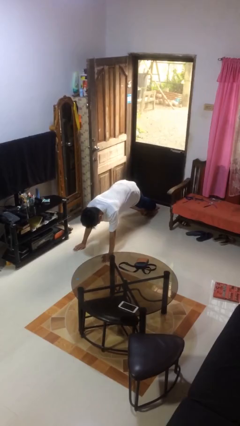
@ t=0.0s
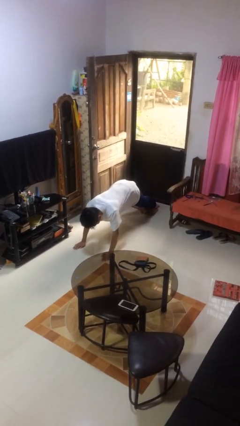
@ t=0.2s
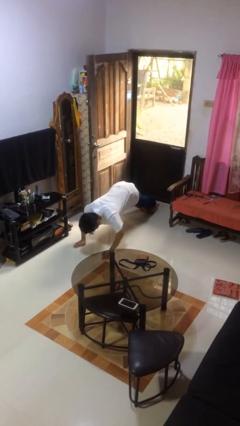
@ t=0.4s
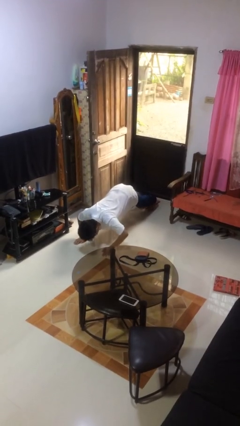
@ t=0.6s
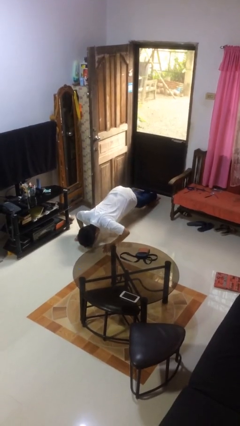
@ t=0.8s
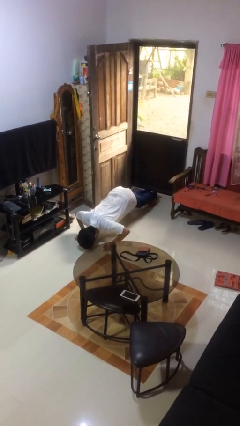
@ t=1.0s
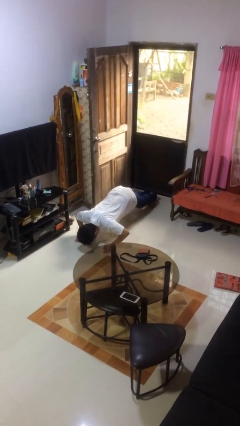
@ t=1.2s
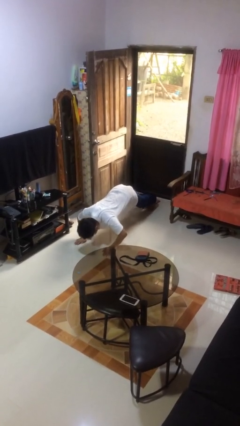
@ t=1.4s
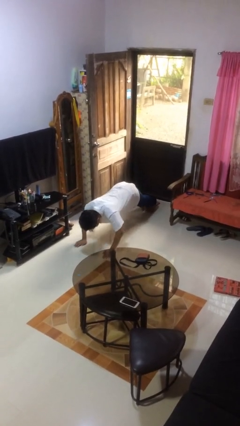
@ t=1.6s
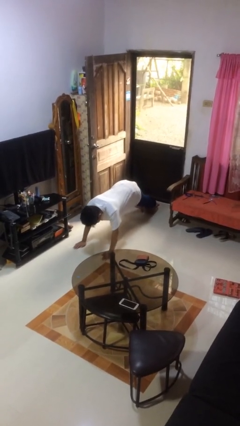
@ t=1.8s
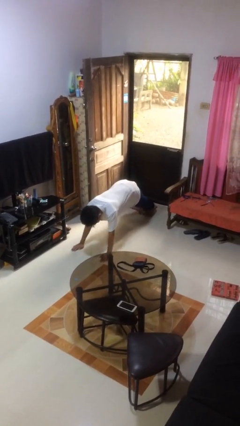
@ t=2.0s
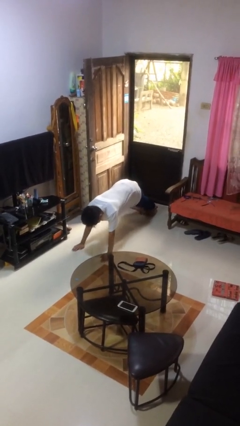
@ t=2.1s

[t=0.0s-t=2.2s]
person exercises with pushup

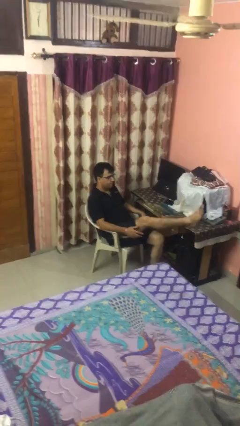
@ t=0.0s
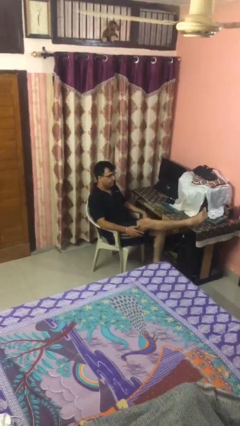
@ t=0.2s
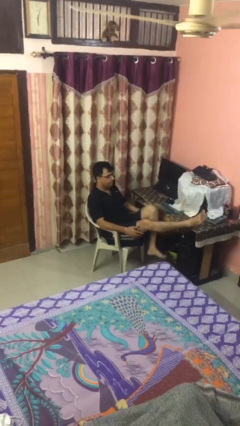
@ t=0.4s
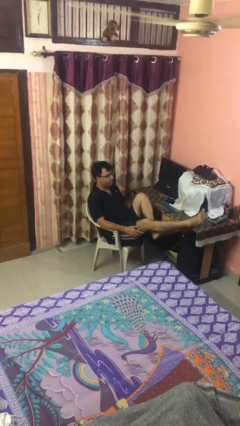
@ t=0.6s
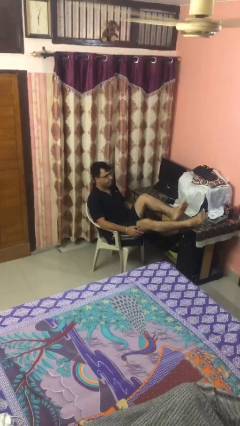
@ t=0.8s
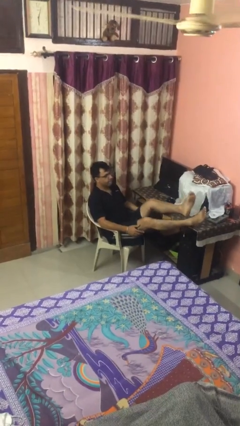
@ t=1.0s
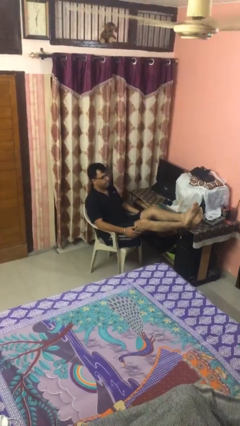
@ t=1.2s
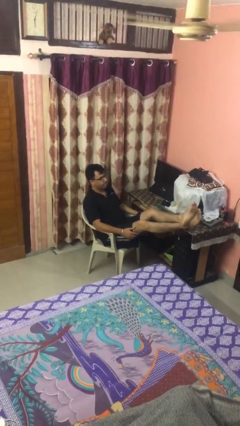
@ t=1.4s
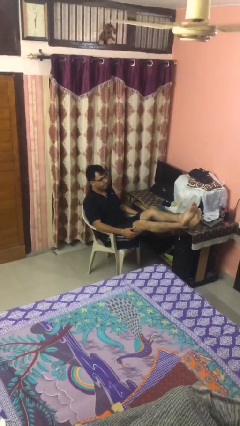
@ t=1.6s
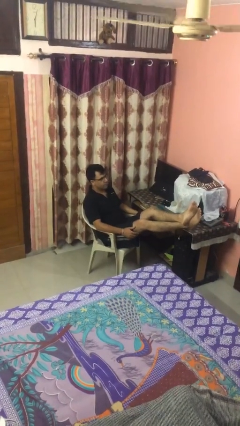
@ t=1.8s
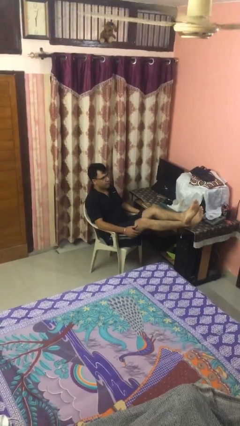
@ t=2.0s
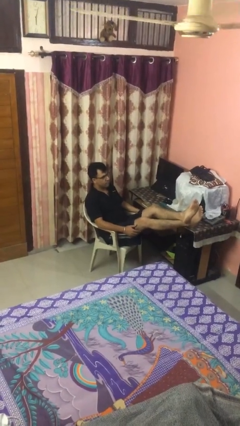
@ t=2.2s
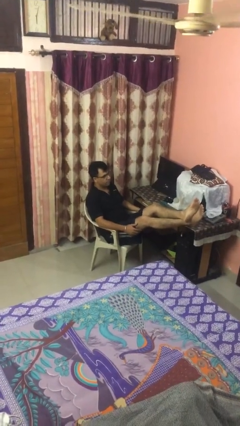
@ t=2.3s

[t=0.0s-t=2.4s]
person puts feet up

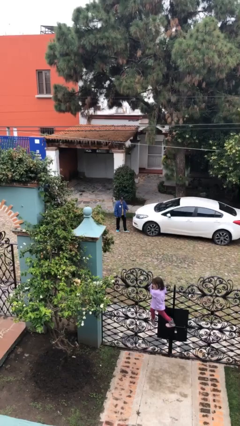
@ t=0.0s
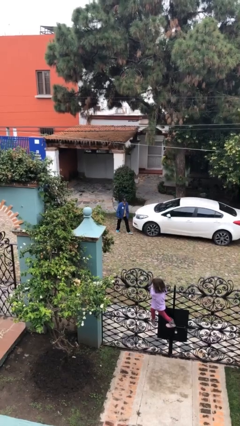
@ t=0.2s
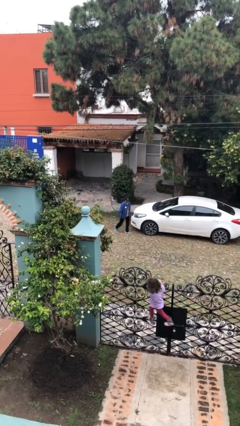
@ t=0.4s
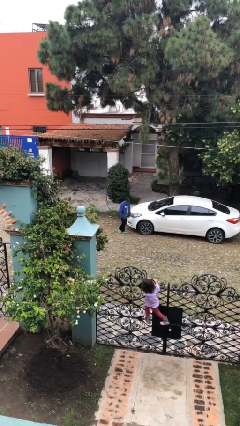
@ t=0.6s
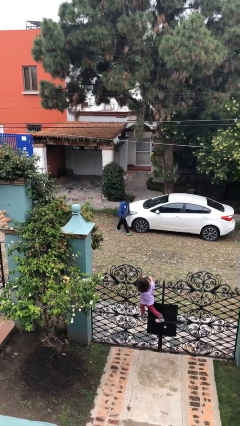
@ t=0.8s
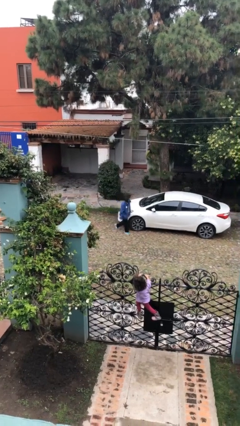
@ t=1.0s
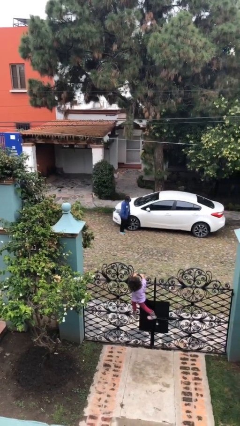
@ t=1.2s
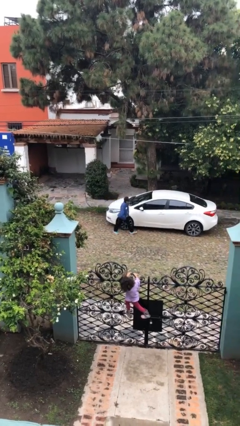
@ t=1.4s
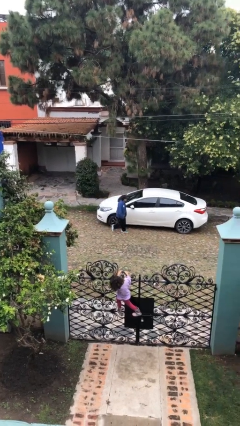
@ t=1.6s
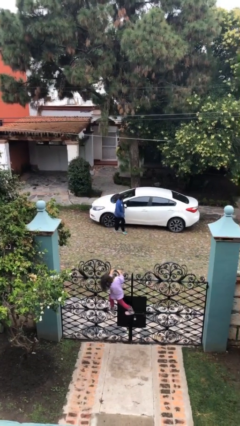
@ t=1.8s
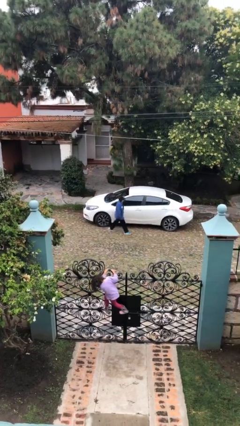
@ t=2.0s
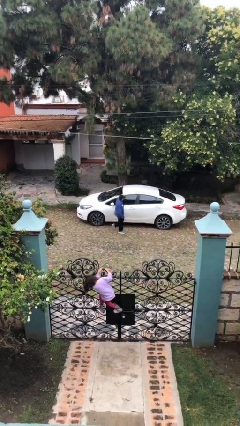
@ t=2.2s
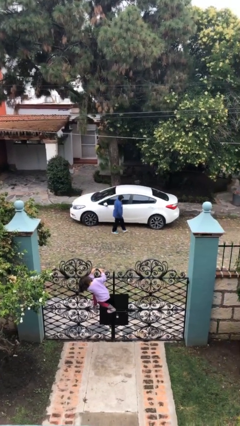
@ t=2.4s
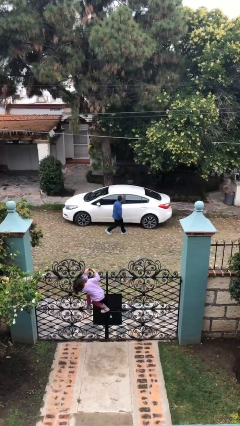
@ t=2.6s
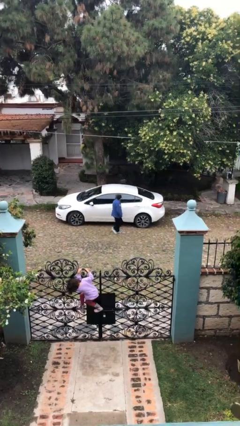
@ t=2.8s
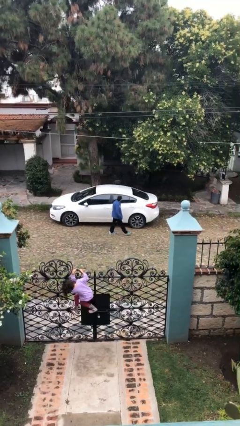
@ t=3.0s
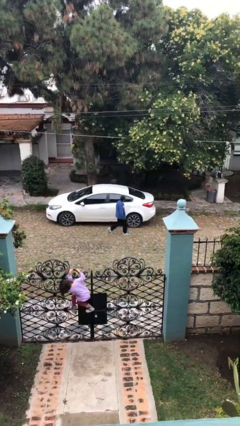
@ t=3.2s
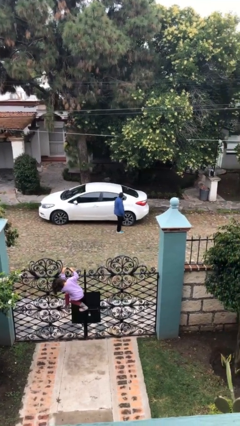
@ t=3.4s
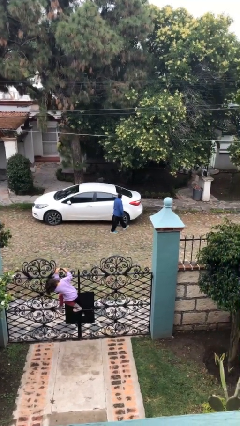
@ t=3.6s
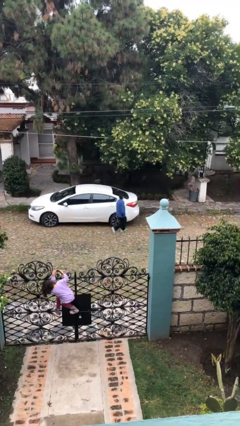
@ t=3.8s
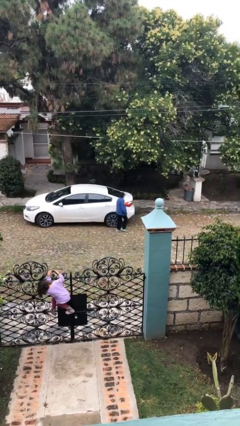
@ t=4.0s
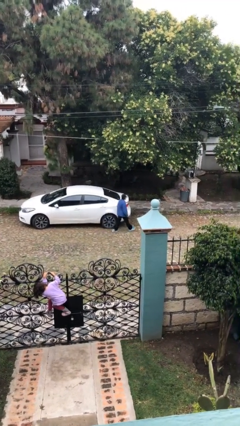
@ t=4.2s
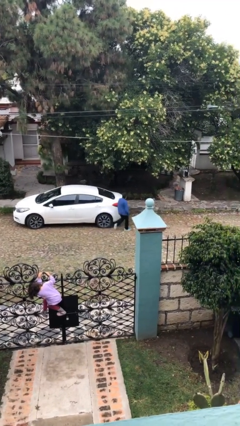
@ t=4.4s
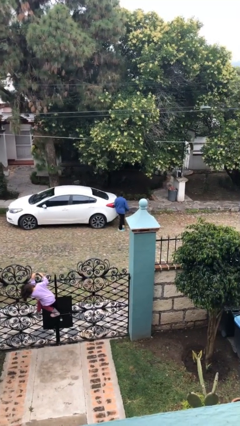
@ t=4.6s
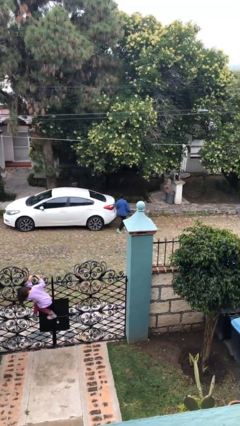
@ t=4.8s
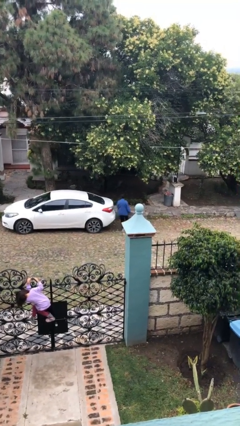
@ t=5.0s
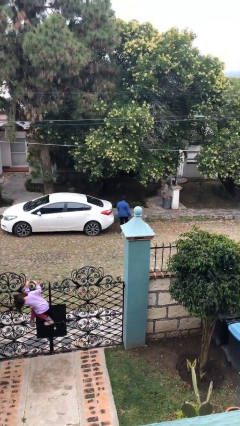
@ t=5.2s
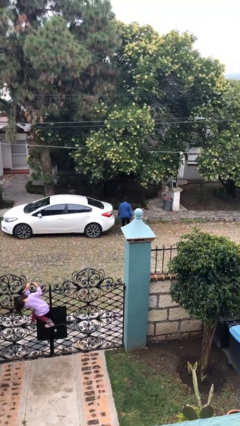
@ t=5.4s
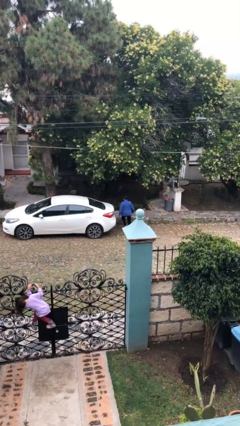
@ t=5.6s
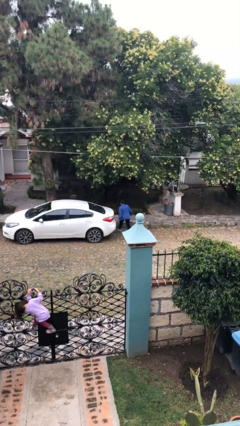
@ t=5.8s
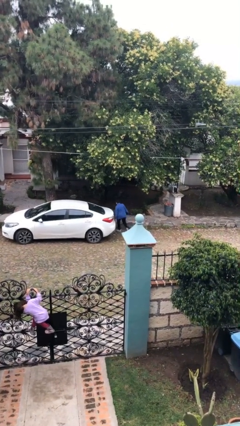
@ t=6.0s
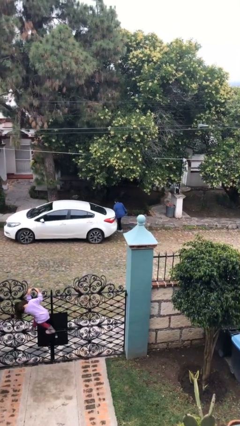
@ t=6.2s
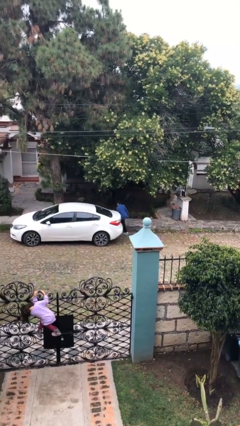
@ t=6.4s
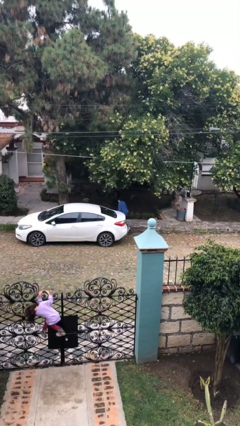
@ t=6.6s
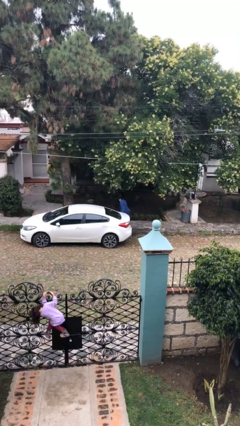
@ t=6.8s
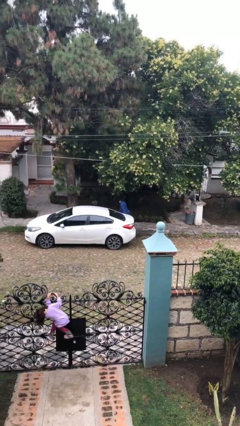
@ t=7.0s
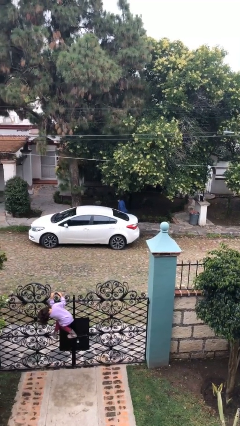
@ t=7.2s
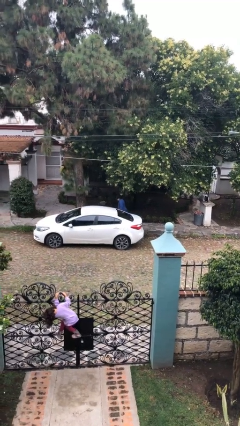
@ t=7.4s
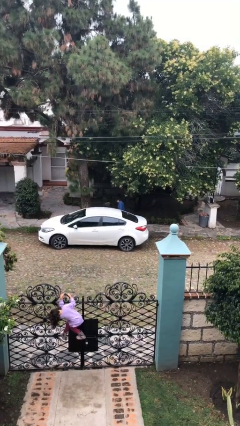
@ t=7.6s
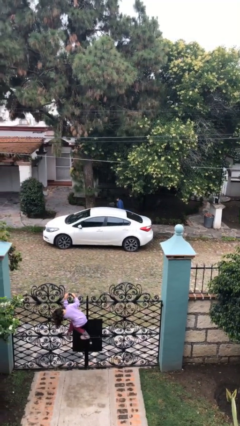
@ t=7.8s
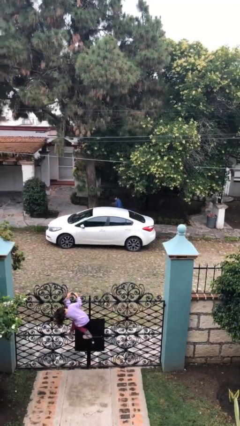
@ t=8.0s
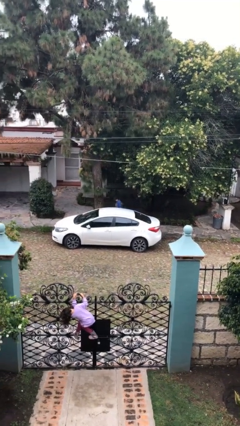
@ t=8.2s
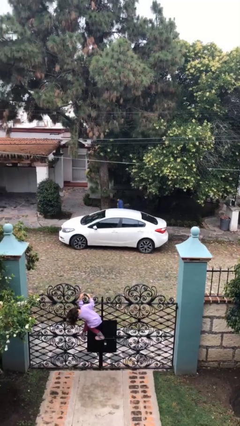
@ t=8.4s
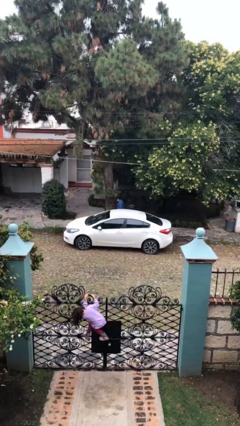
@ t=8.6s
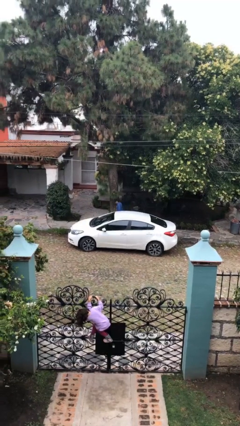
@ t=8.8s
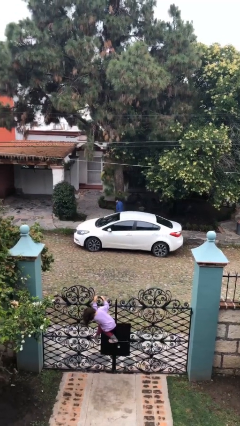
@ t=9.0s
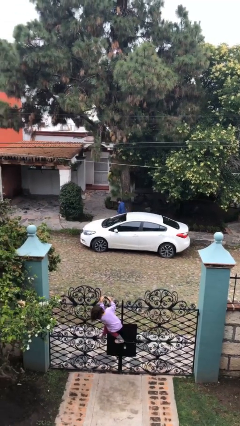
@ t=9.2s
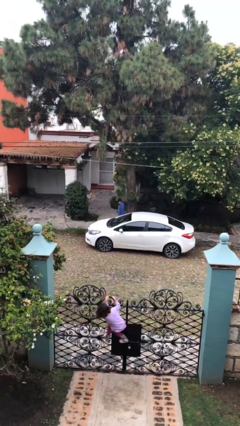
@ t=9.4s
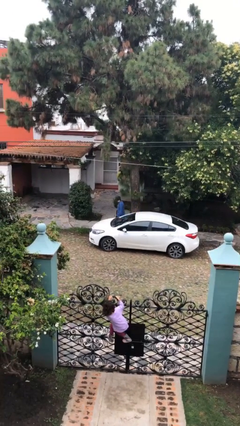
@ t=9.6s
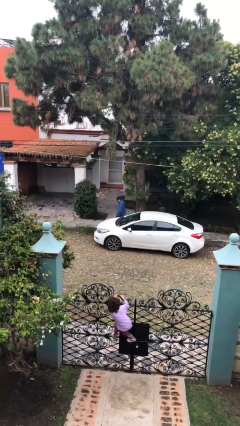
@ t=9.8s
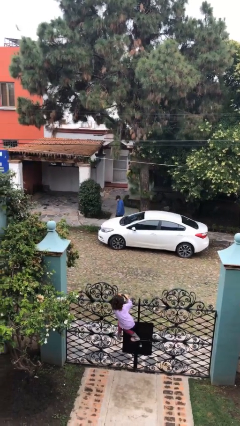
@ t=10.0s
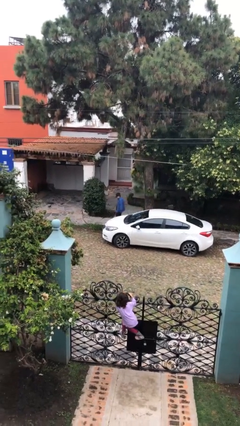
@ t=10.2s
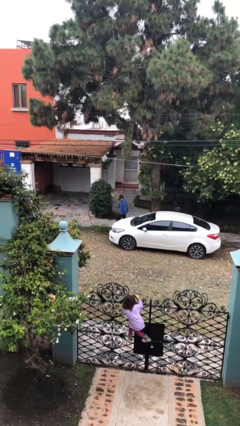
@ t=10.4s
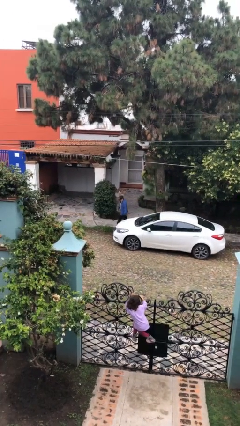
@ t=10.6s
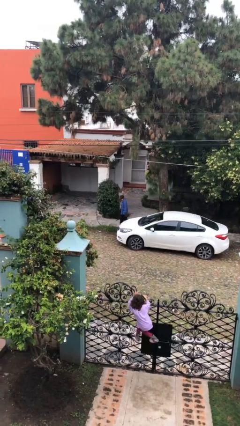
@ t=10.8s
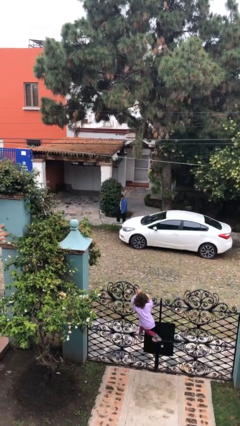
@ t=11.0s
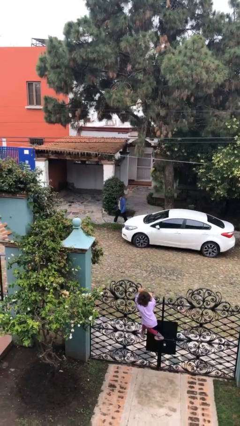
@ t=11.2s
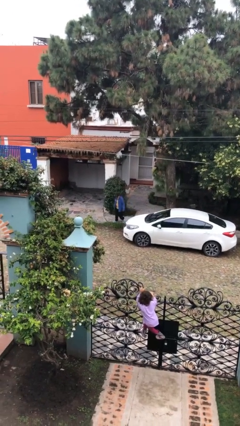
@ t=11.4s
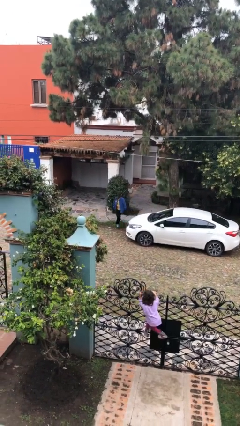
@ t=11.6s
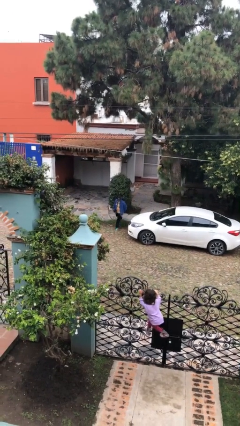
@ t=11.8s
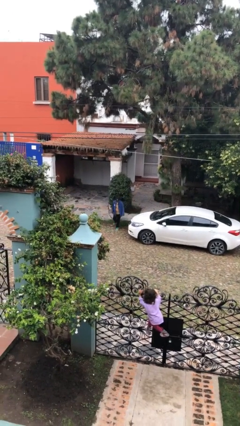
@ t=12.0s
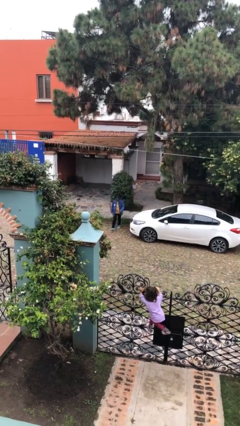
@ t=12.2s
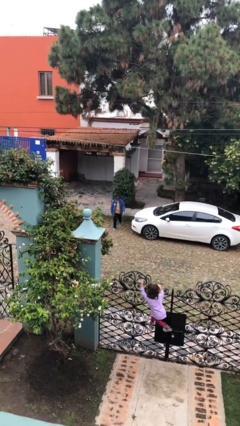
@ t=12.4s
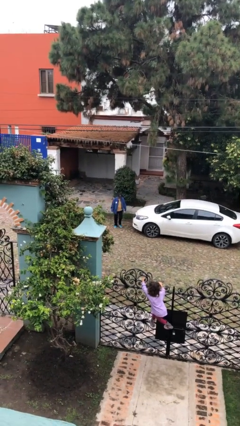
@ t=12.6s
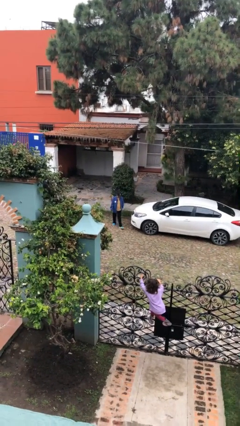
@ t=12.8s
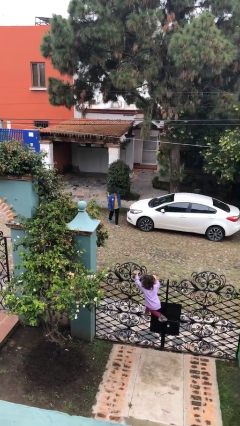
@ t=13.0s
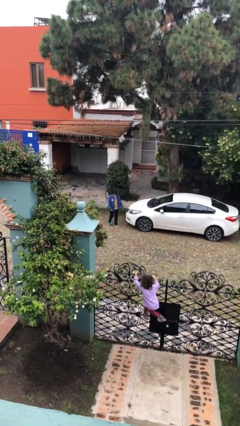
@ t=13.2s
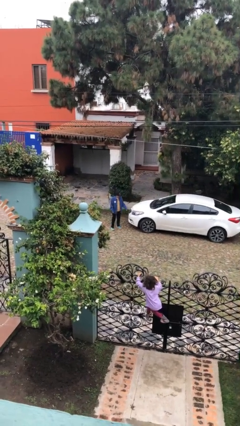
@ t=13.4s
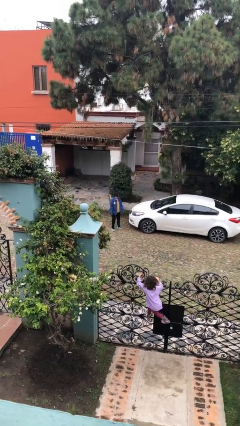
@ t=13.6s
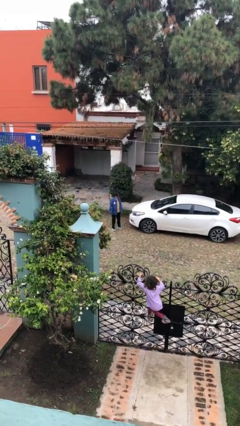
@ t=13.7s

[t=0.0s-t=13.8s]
person walks around car
